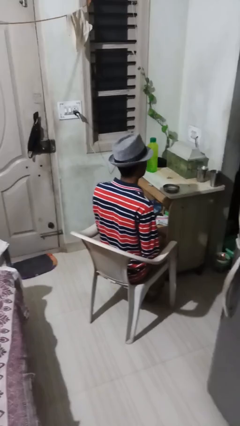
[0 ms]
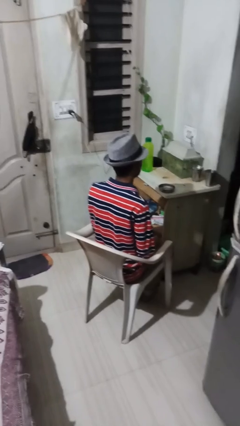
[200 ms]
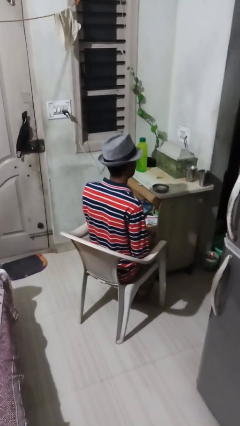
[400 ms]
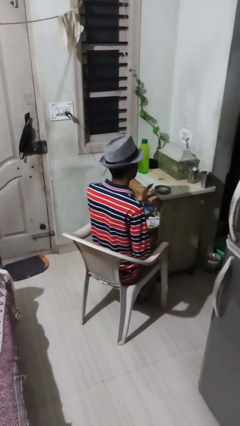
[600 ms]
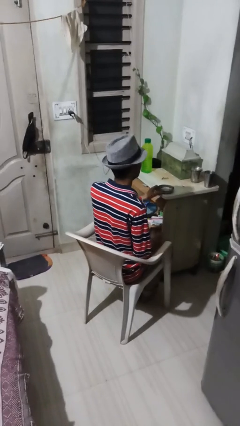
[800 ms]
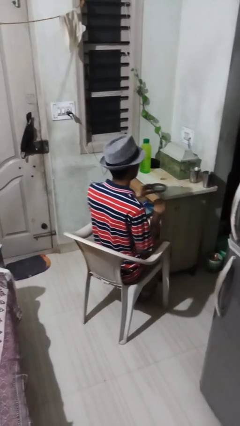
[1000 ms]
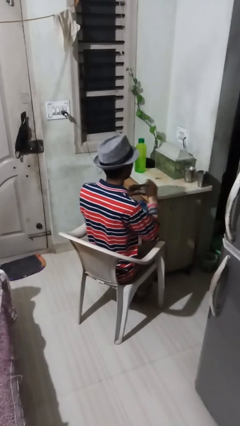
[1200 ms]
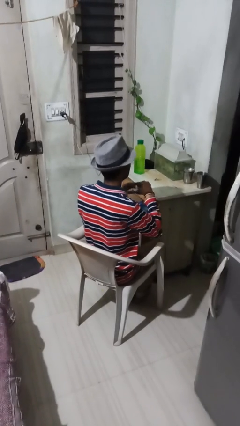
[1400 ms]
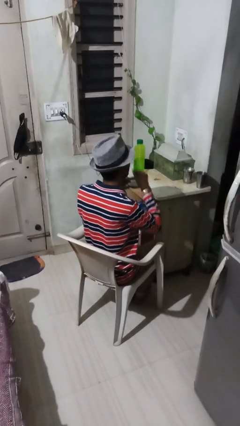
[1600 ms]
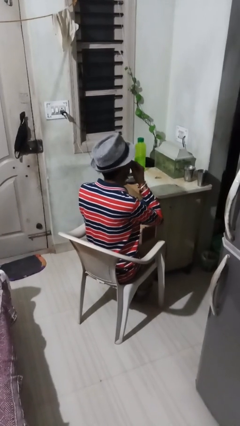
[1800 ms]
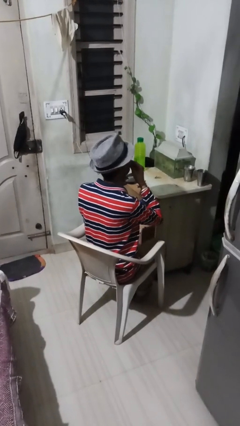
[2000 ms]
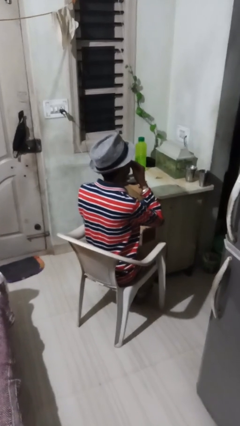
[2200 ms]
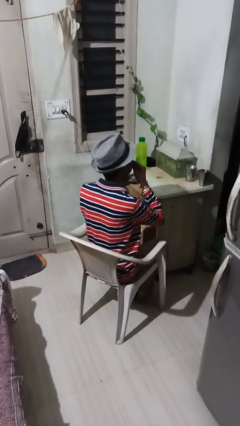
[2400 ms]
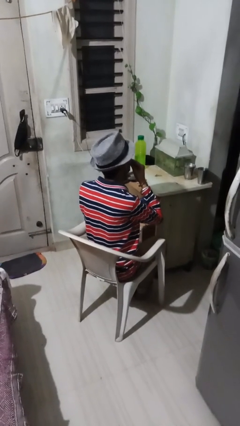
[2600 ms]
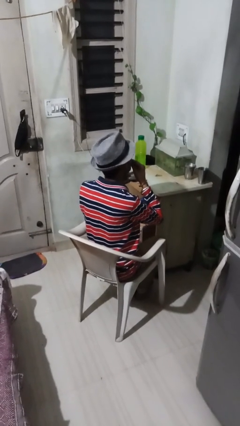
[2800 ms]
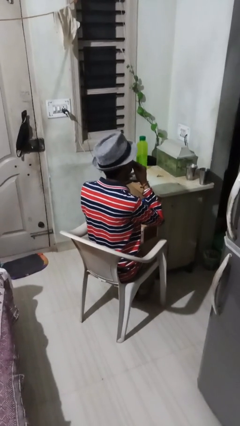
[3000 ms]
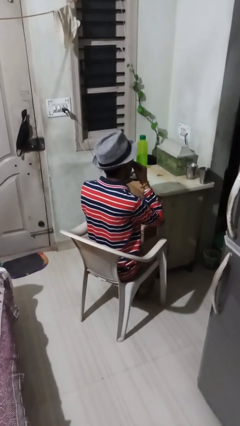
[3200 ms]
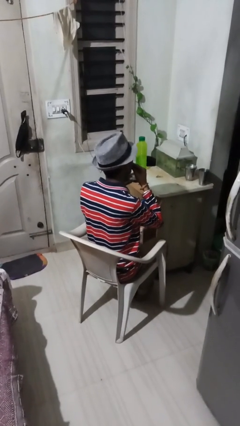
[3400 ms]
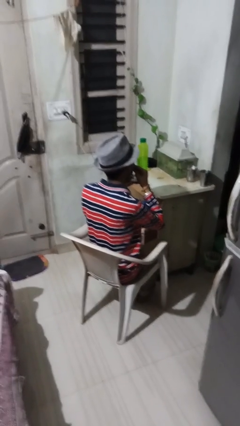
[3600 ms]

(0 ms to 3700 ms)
person eats with hands

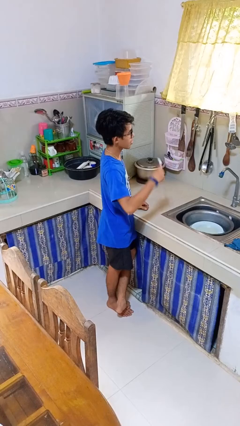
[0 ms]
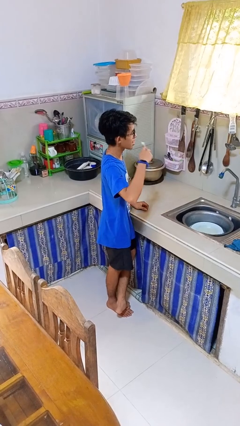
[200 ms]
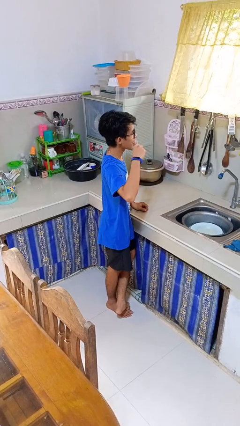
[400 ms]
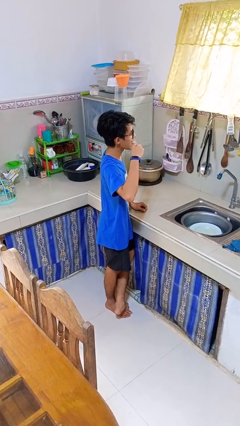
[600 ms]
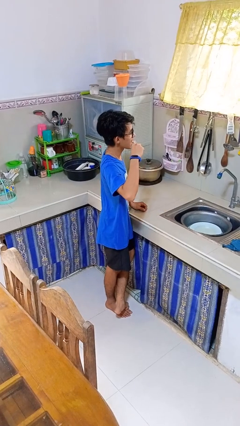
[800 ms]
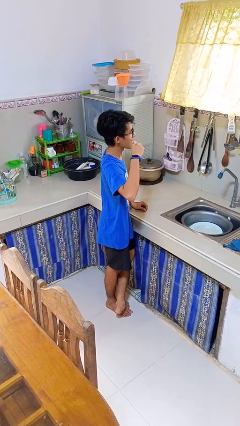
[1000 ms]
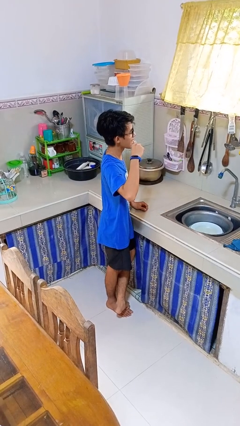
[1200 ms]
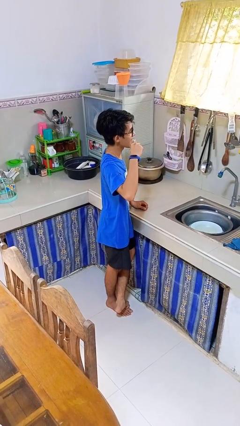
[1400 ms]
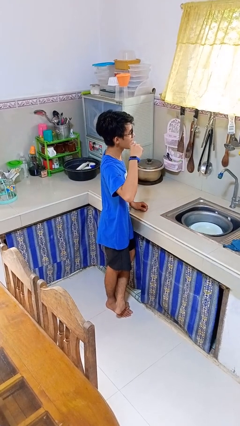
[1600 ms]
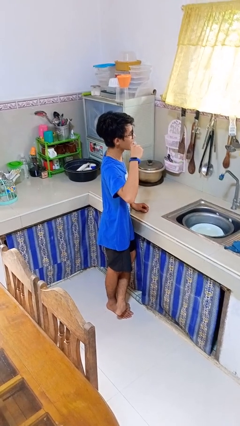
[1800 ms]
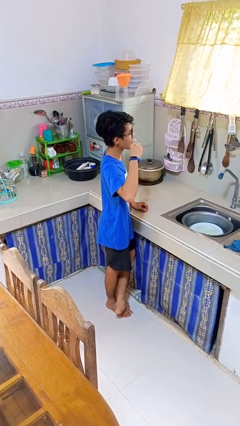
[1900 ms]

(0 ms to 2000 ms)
person brushes teeth

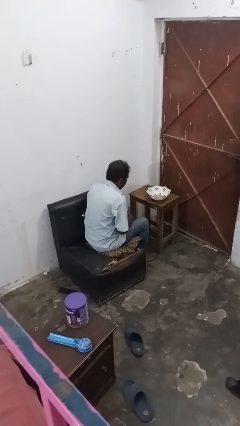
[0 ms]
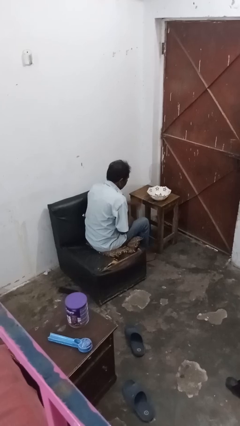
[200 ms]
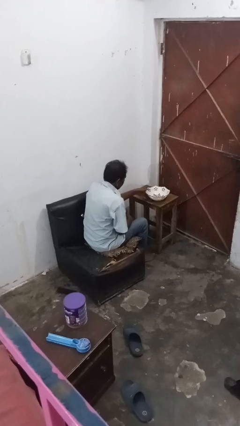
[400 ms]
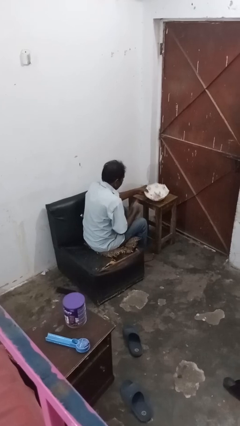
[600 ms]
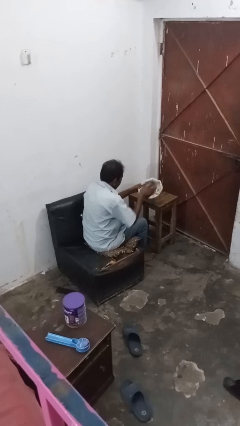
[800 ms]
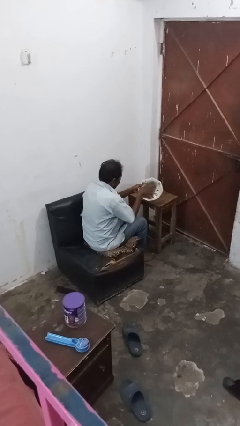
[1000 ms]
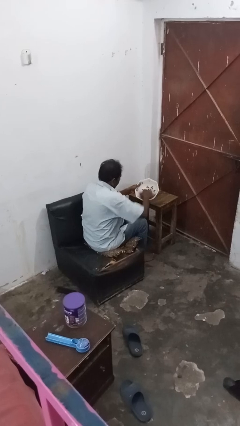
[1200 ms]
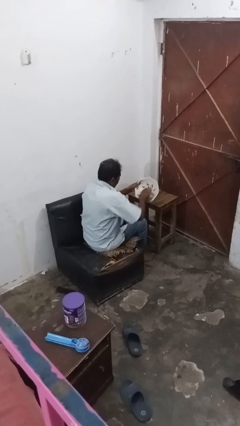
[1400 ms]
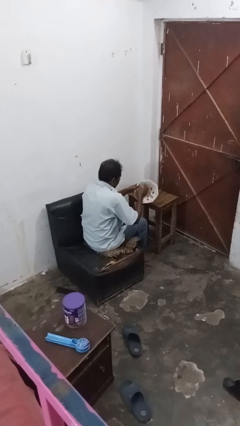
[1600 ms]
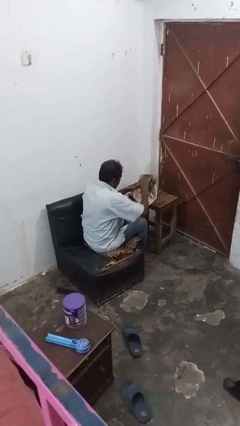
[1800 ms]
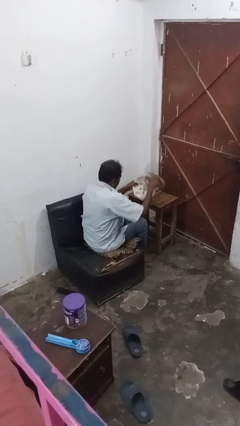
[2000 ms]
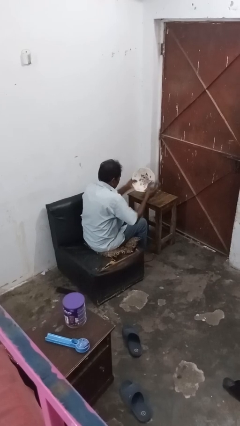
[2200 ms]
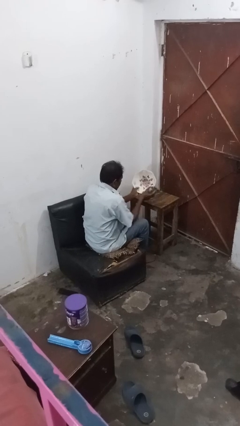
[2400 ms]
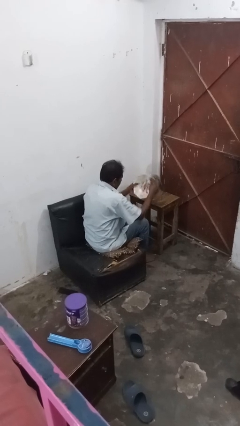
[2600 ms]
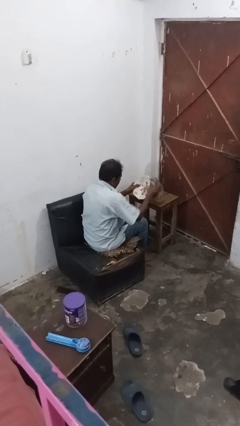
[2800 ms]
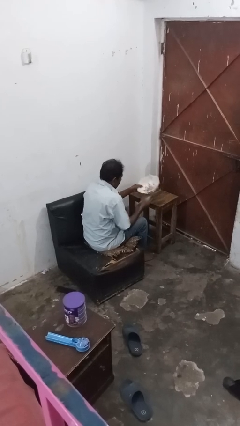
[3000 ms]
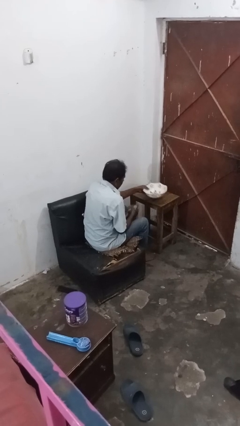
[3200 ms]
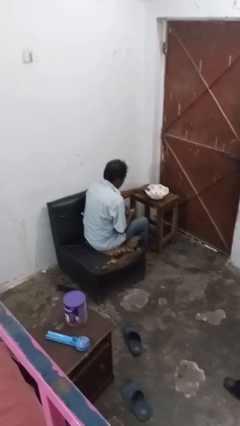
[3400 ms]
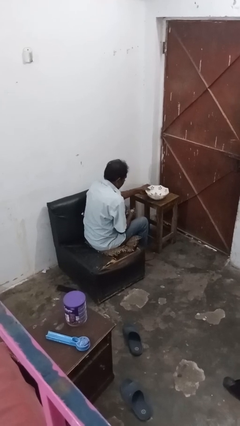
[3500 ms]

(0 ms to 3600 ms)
person dries dish

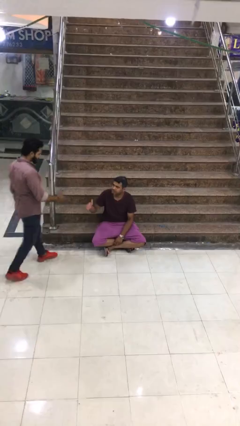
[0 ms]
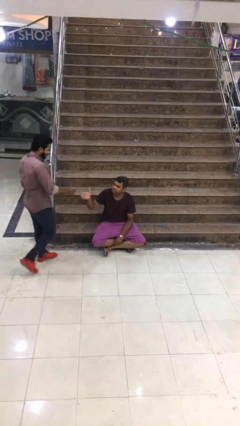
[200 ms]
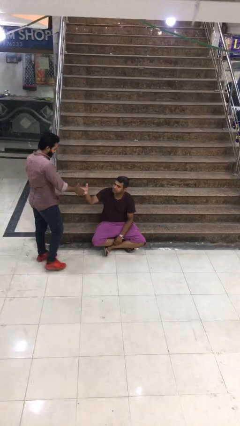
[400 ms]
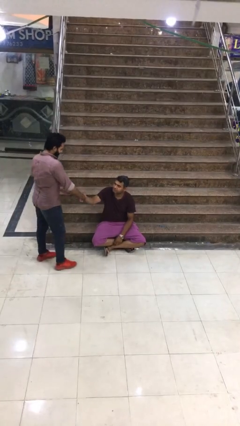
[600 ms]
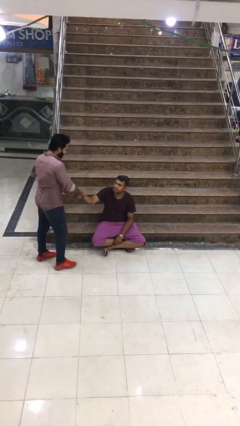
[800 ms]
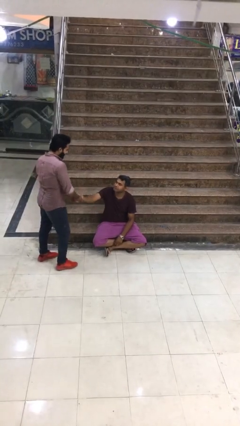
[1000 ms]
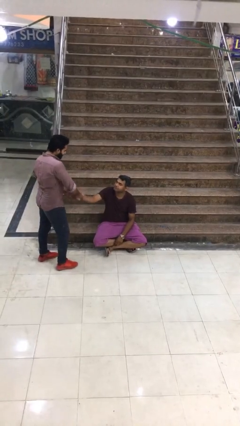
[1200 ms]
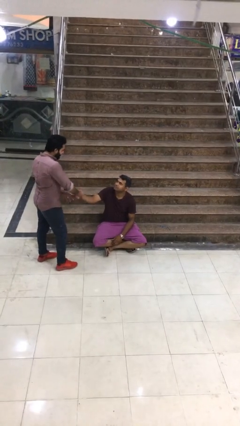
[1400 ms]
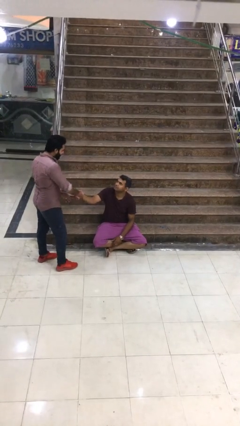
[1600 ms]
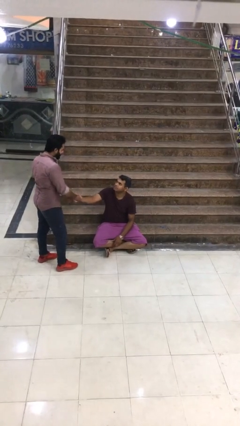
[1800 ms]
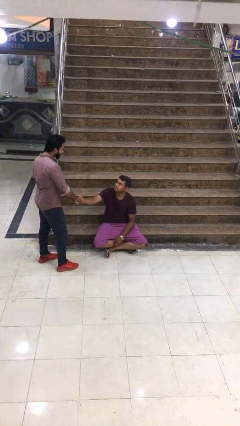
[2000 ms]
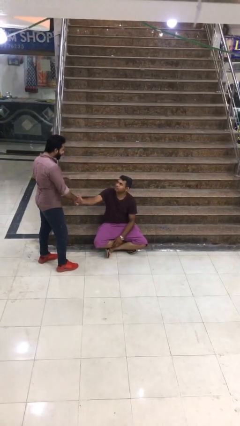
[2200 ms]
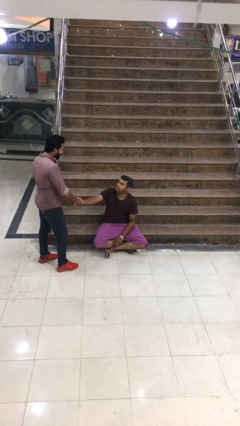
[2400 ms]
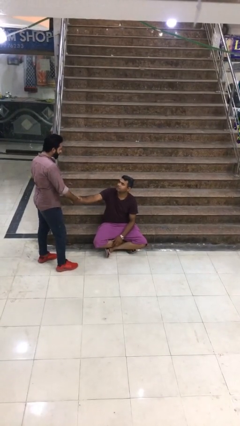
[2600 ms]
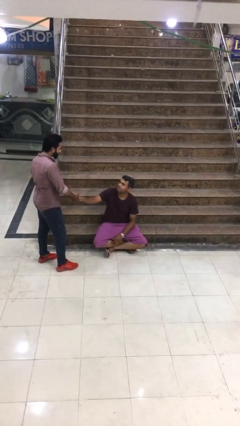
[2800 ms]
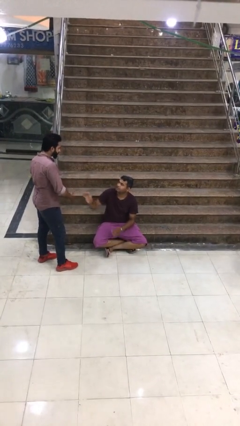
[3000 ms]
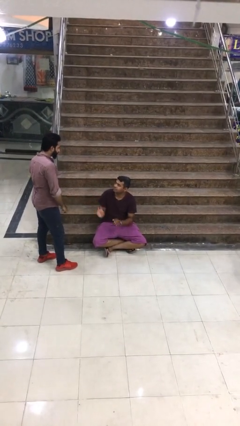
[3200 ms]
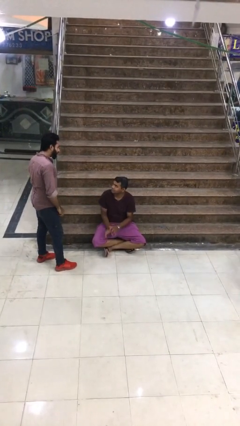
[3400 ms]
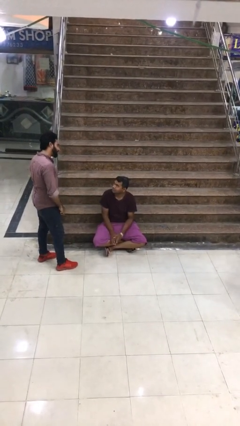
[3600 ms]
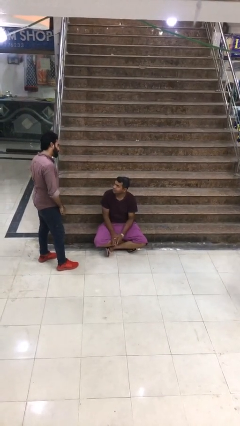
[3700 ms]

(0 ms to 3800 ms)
person shakes hand

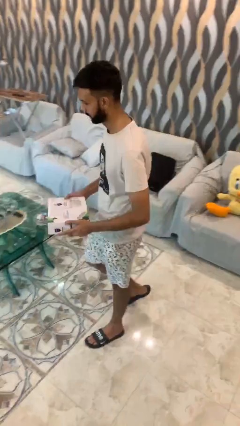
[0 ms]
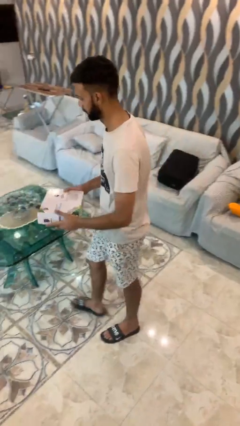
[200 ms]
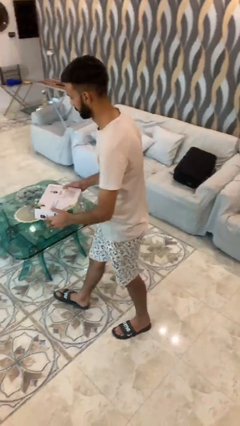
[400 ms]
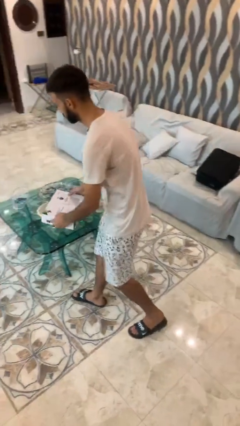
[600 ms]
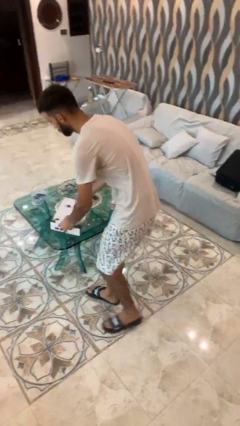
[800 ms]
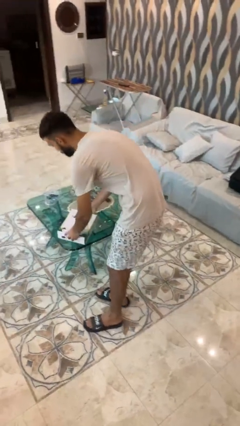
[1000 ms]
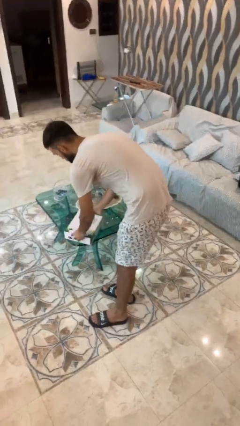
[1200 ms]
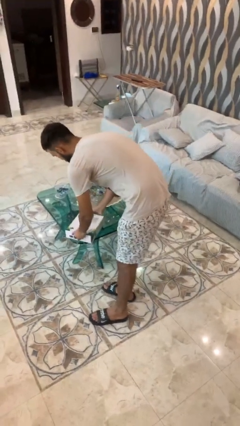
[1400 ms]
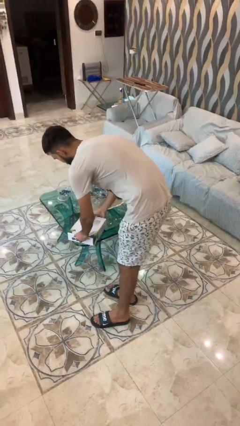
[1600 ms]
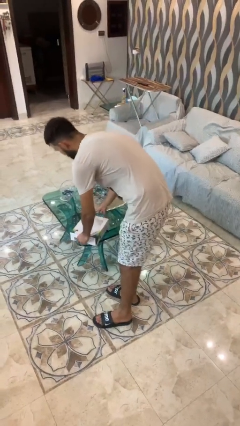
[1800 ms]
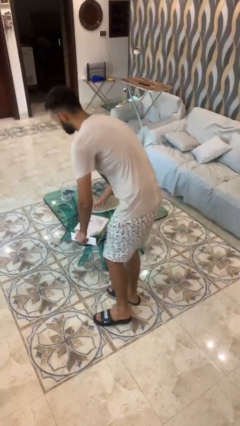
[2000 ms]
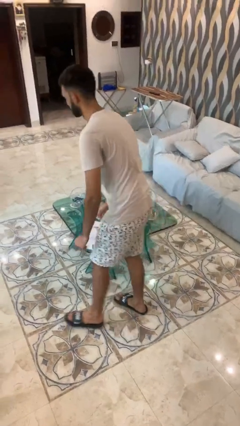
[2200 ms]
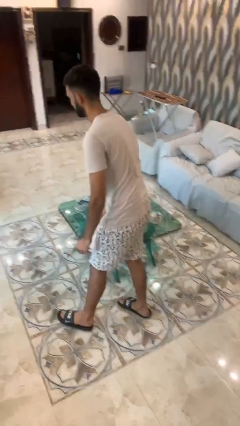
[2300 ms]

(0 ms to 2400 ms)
person puts down object on table

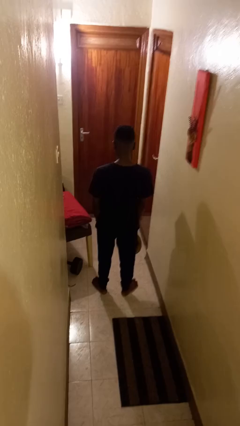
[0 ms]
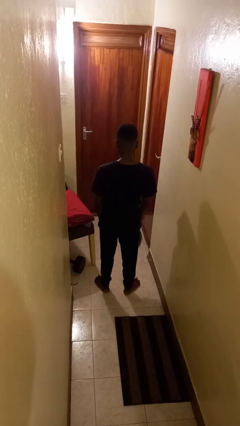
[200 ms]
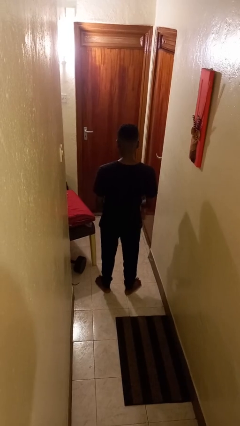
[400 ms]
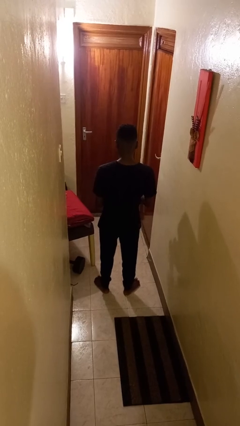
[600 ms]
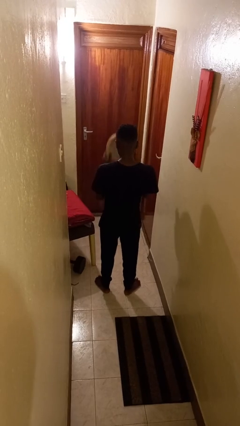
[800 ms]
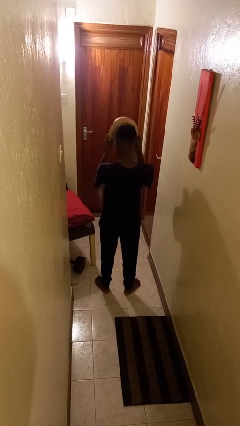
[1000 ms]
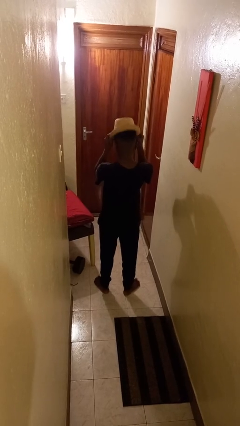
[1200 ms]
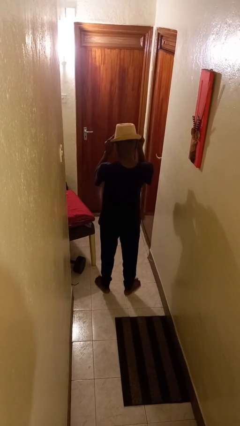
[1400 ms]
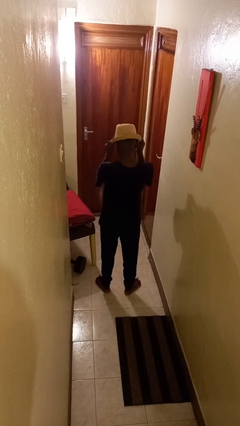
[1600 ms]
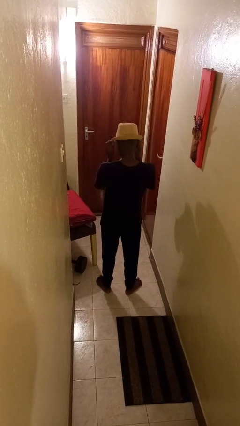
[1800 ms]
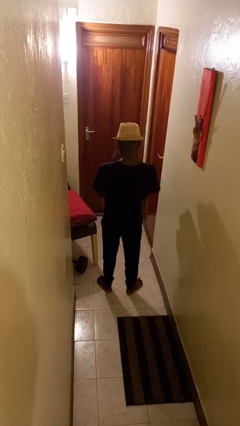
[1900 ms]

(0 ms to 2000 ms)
person puts on hat
